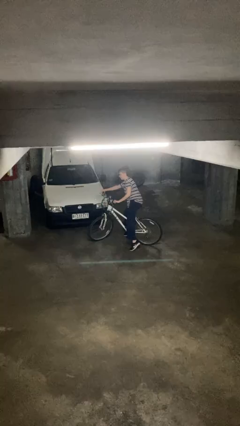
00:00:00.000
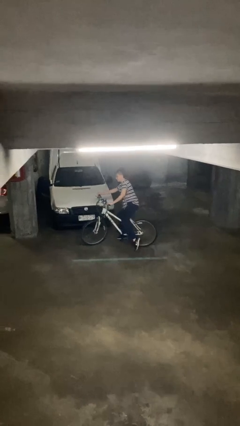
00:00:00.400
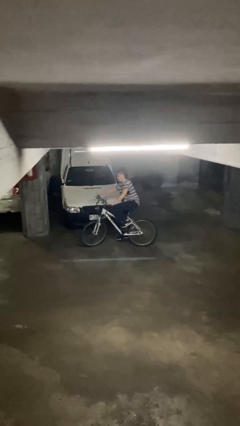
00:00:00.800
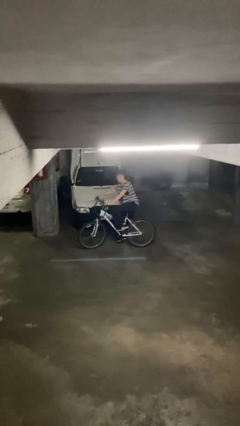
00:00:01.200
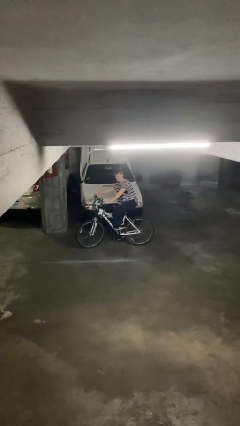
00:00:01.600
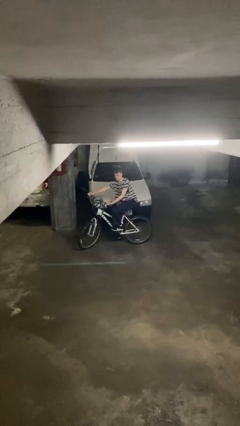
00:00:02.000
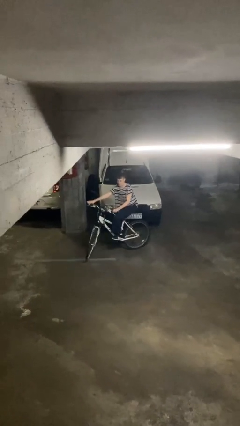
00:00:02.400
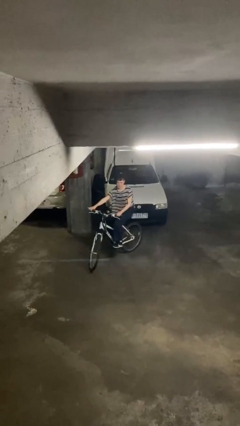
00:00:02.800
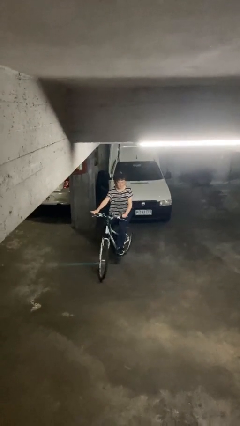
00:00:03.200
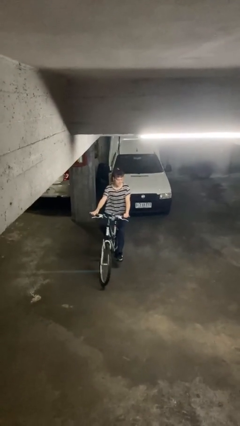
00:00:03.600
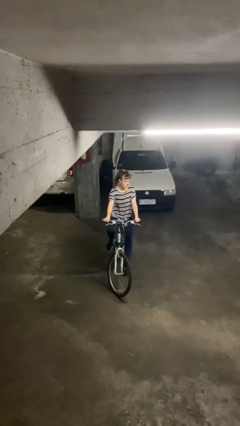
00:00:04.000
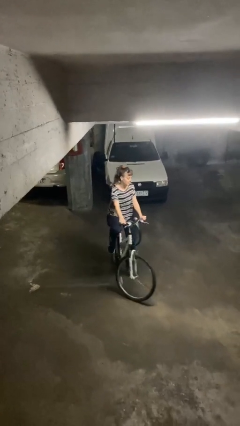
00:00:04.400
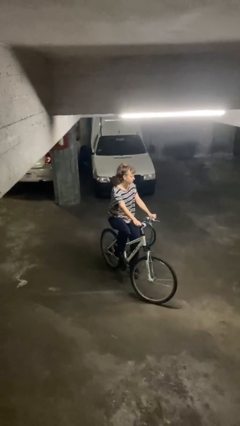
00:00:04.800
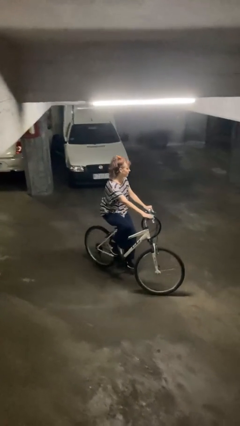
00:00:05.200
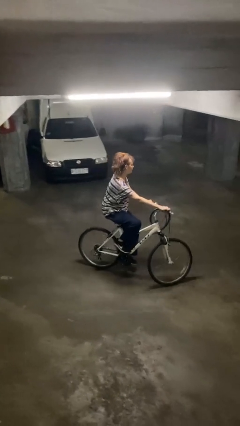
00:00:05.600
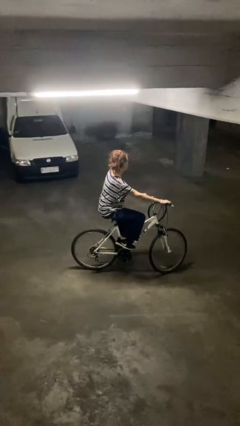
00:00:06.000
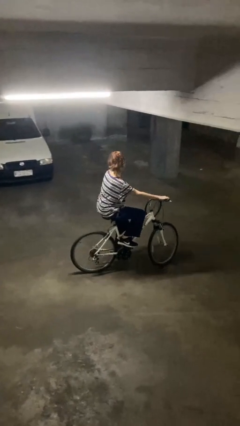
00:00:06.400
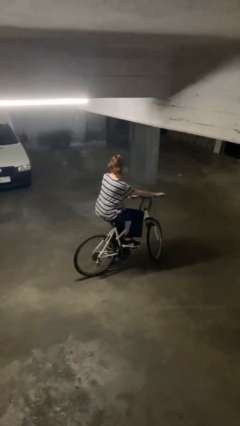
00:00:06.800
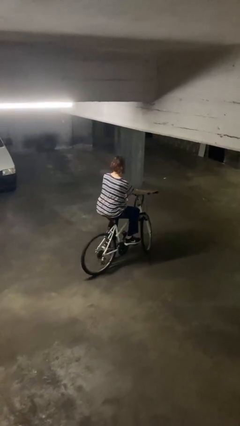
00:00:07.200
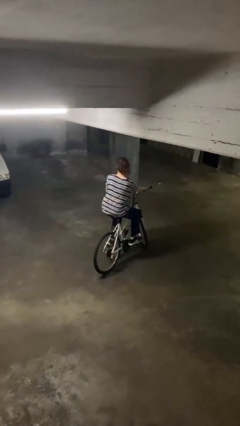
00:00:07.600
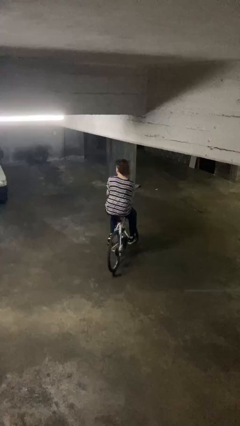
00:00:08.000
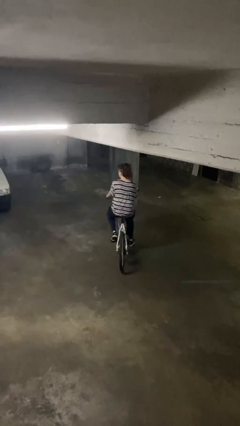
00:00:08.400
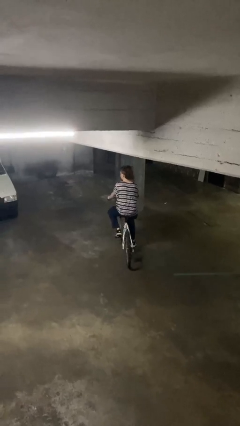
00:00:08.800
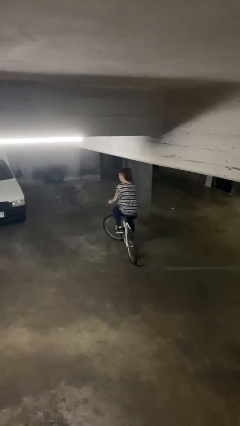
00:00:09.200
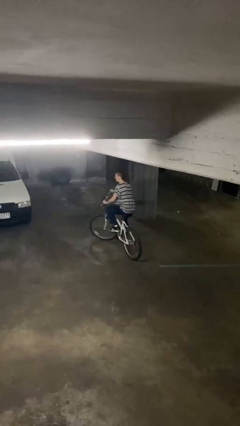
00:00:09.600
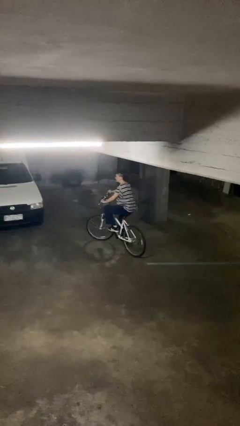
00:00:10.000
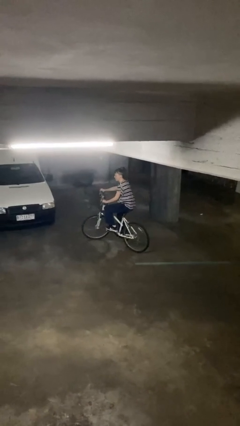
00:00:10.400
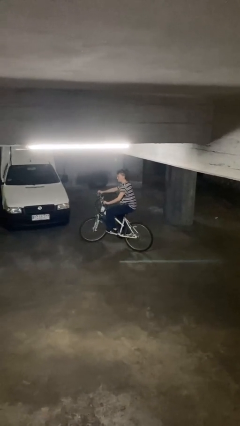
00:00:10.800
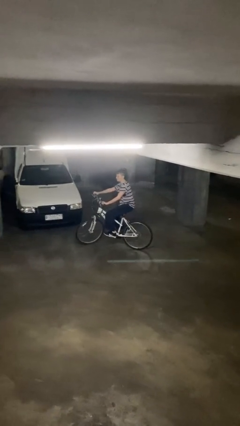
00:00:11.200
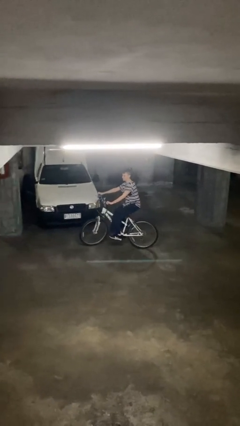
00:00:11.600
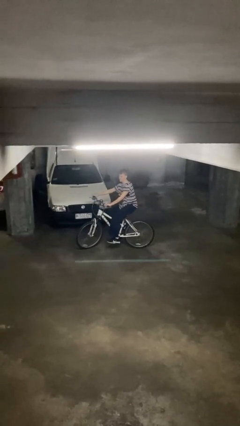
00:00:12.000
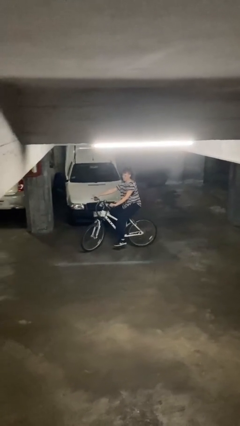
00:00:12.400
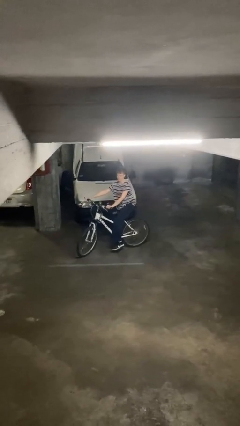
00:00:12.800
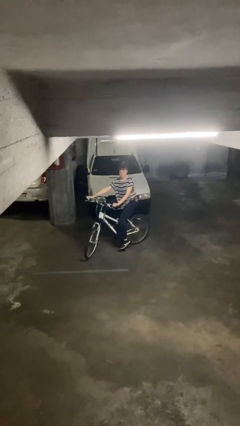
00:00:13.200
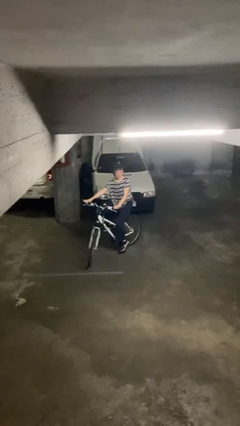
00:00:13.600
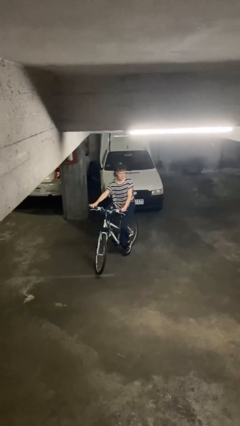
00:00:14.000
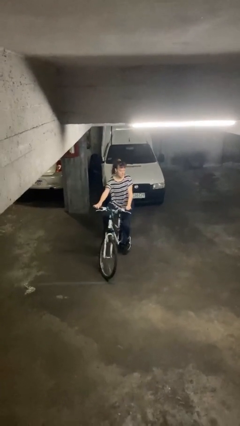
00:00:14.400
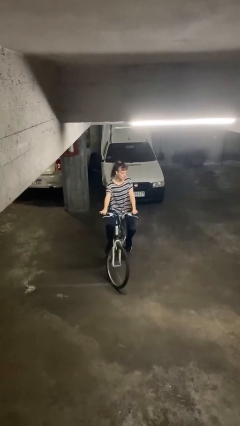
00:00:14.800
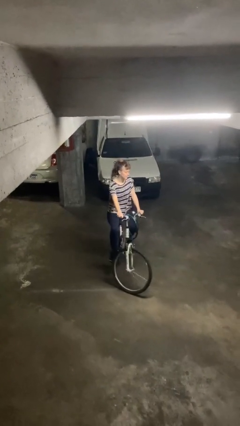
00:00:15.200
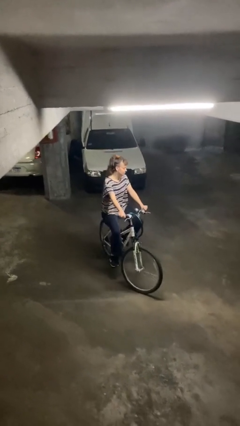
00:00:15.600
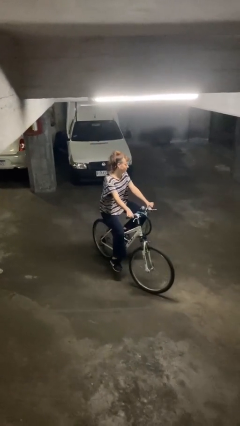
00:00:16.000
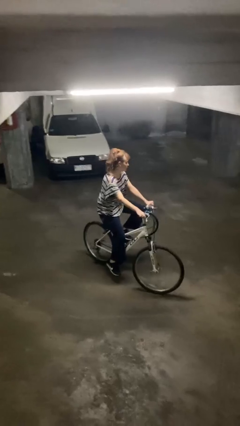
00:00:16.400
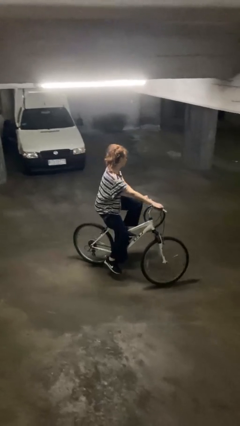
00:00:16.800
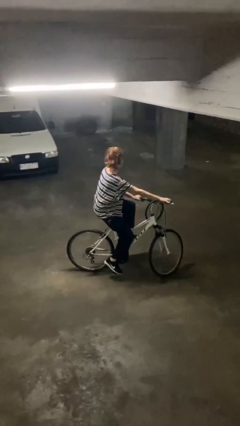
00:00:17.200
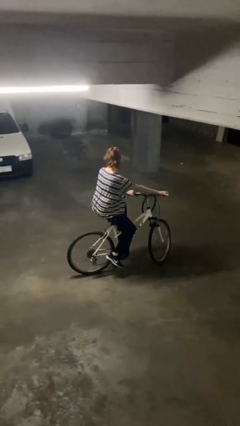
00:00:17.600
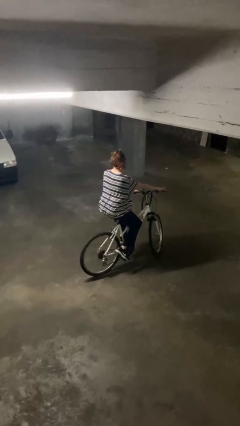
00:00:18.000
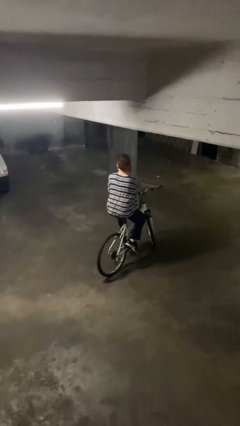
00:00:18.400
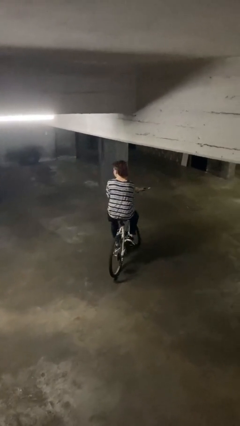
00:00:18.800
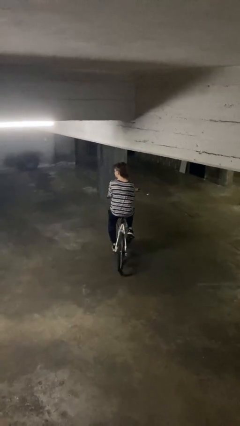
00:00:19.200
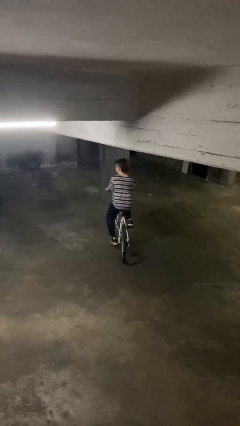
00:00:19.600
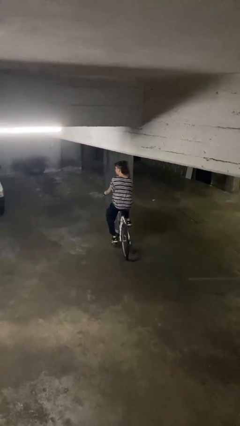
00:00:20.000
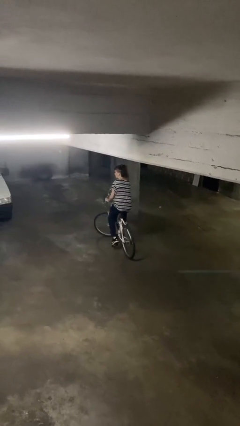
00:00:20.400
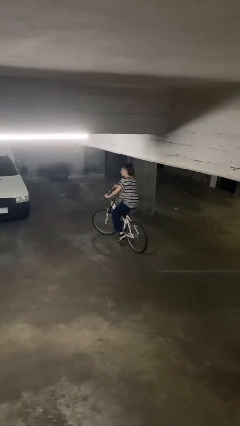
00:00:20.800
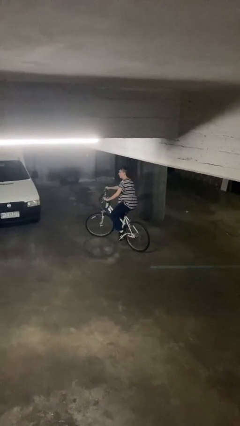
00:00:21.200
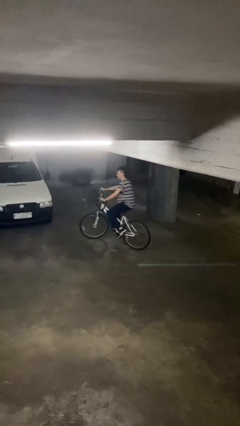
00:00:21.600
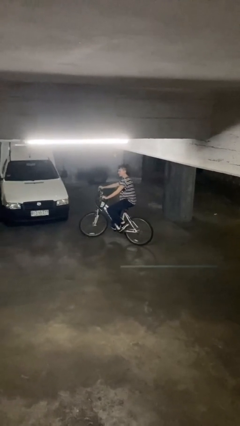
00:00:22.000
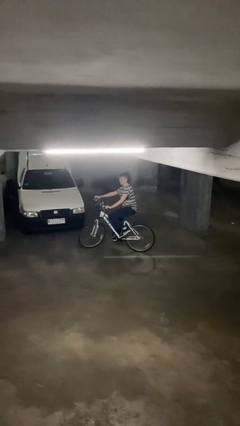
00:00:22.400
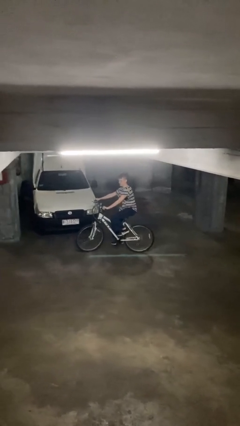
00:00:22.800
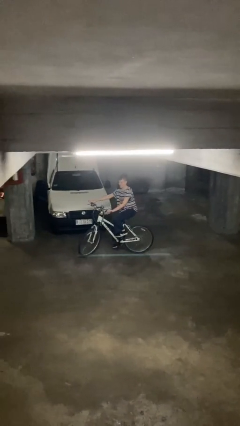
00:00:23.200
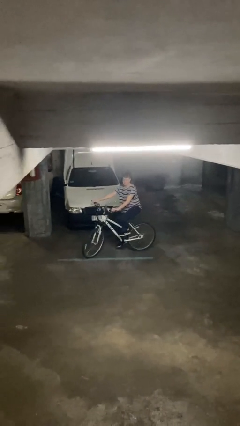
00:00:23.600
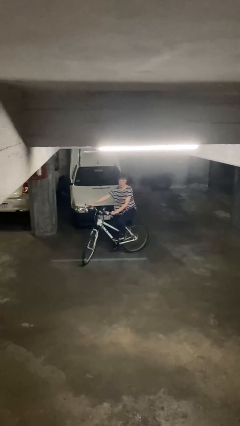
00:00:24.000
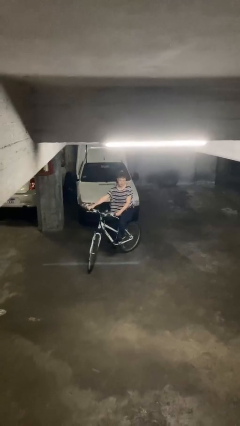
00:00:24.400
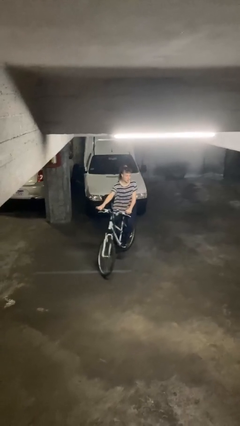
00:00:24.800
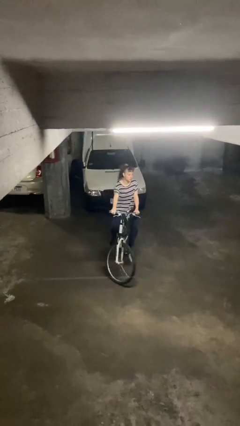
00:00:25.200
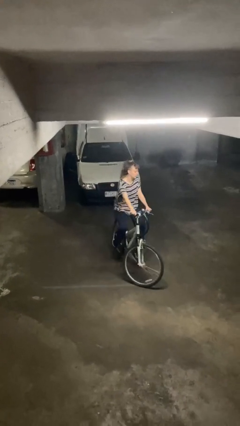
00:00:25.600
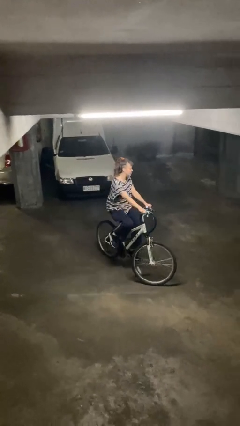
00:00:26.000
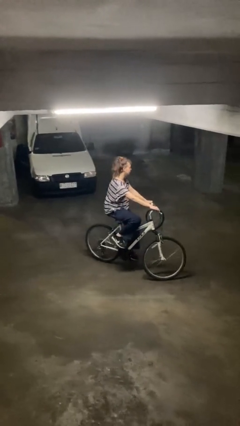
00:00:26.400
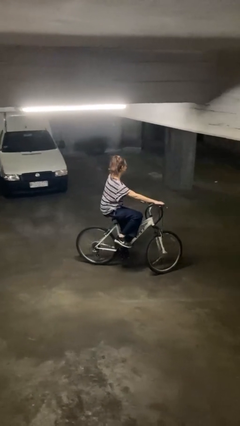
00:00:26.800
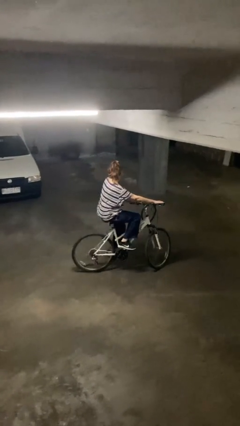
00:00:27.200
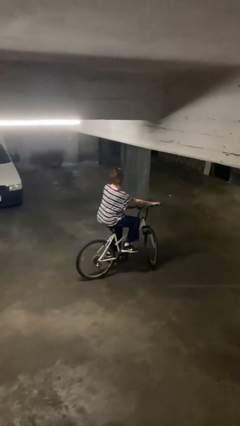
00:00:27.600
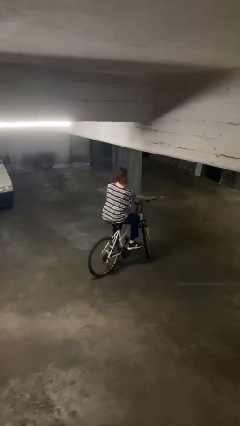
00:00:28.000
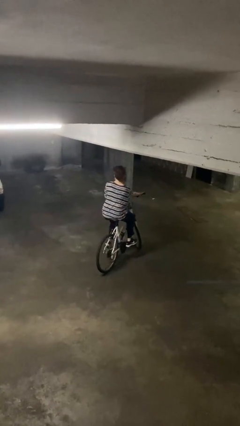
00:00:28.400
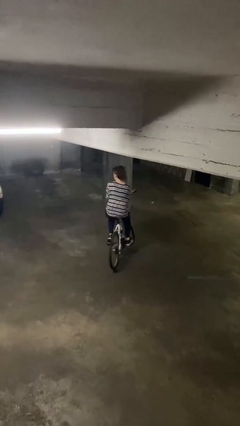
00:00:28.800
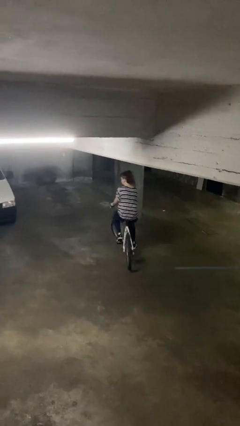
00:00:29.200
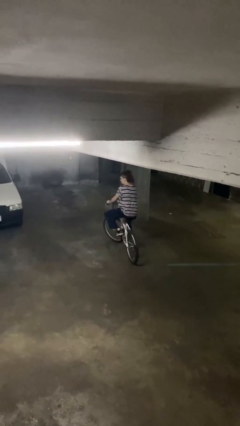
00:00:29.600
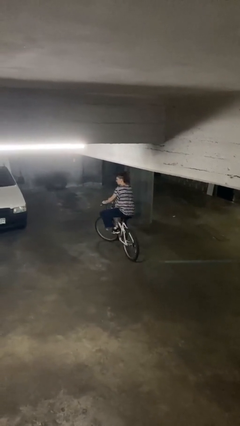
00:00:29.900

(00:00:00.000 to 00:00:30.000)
person rides bicycle

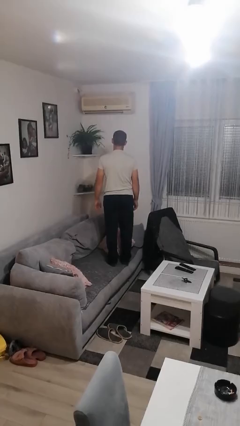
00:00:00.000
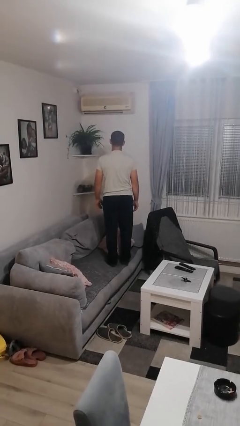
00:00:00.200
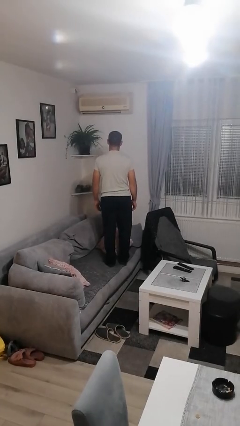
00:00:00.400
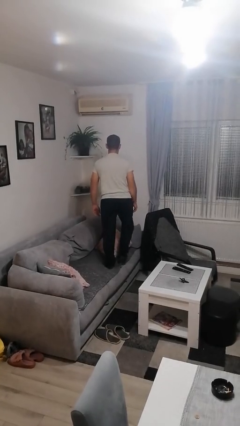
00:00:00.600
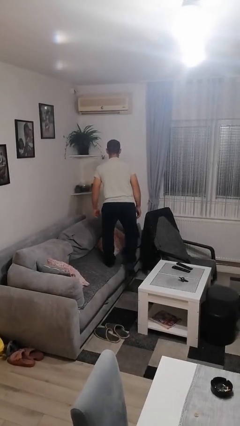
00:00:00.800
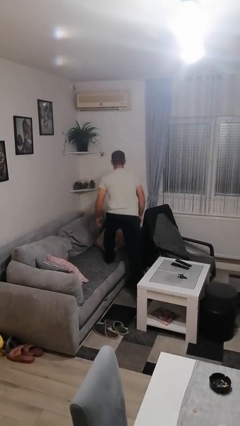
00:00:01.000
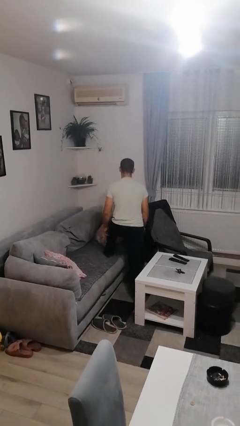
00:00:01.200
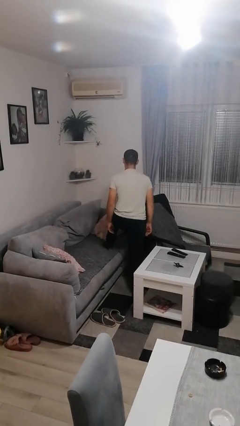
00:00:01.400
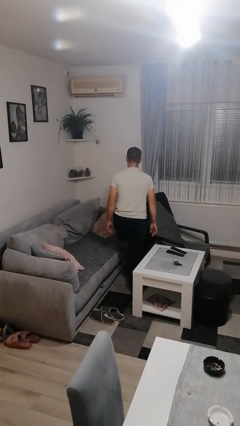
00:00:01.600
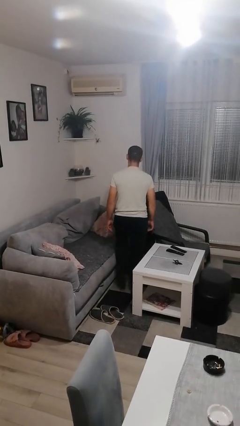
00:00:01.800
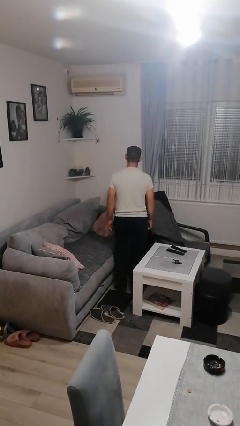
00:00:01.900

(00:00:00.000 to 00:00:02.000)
person climbs off couch

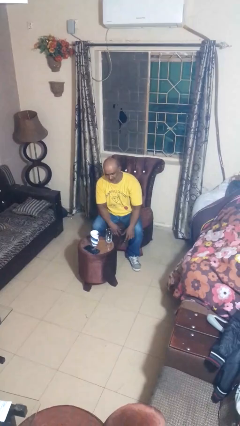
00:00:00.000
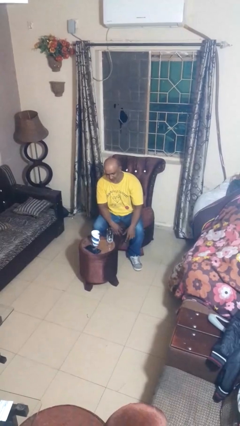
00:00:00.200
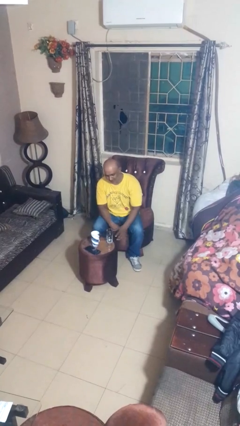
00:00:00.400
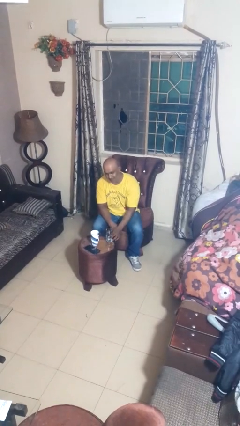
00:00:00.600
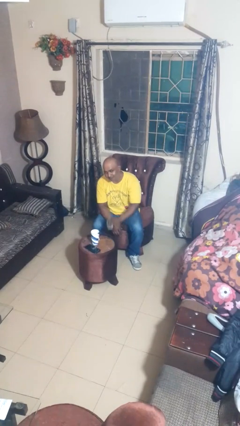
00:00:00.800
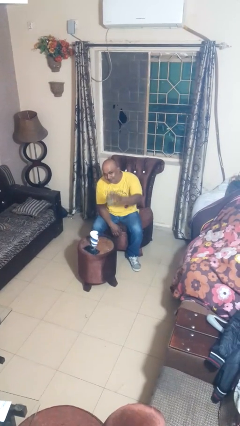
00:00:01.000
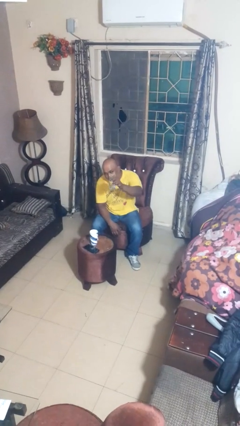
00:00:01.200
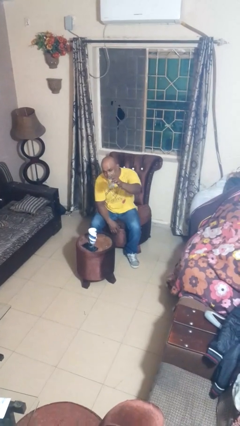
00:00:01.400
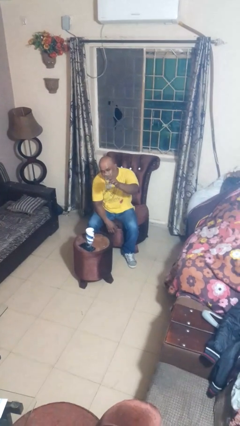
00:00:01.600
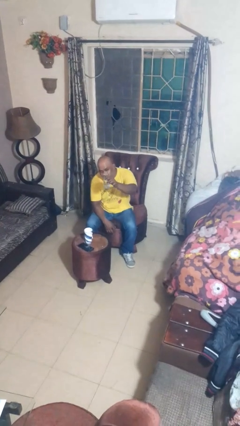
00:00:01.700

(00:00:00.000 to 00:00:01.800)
person picks up object from table
